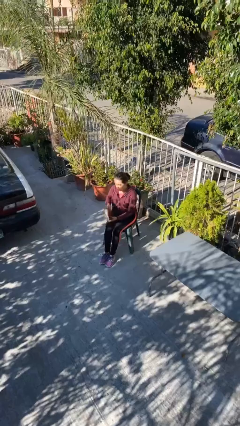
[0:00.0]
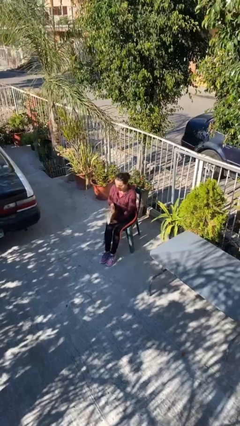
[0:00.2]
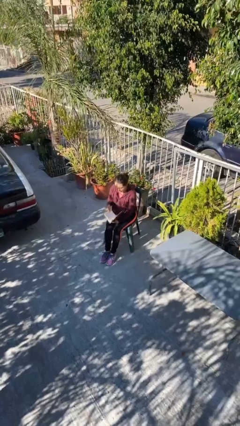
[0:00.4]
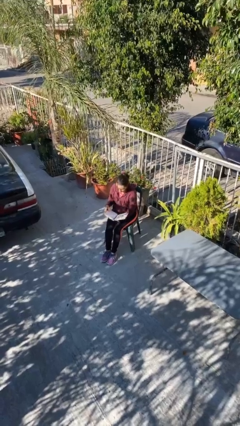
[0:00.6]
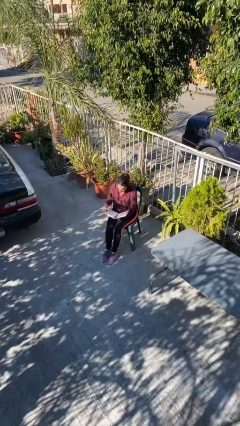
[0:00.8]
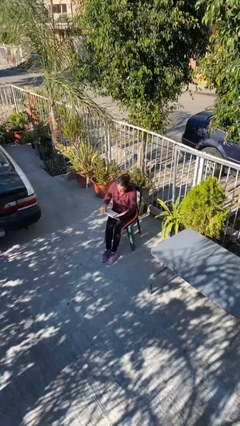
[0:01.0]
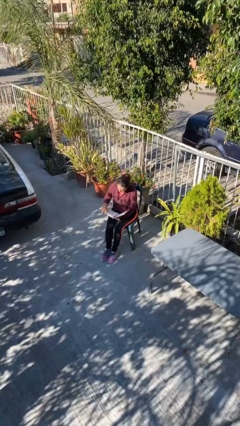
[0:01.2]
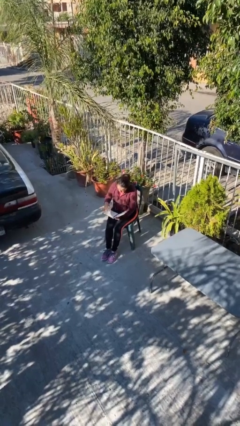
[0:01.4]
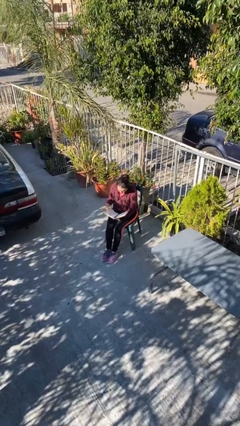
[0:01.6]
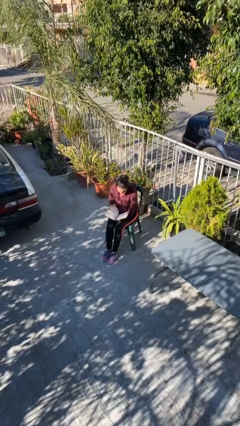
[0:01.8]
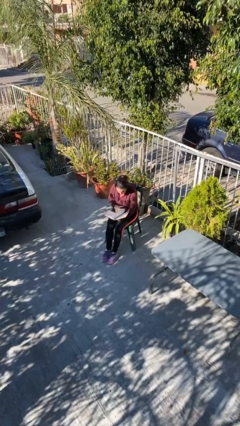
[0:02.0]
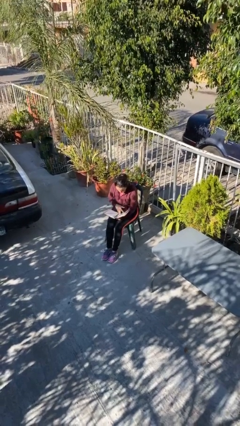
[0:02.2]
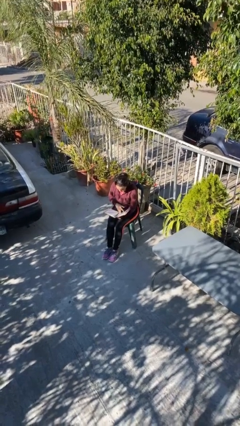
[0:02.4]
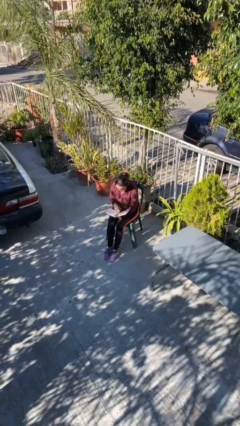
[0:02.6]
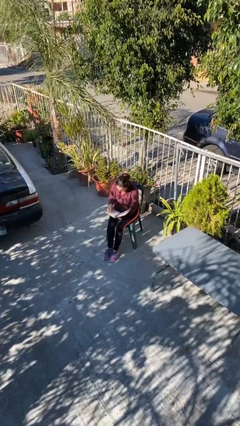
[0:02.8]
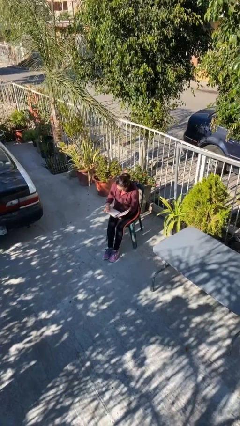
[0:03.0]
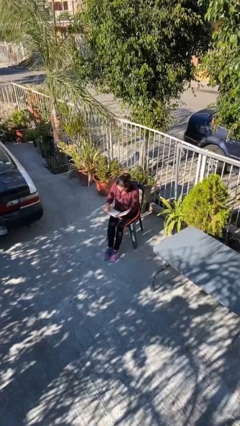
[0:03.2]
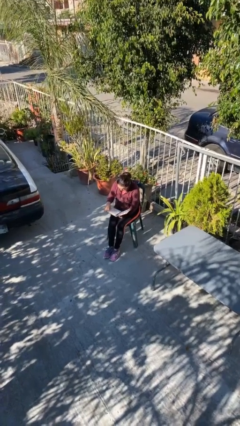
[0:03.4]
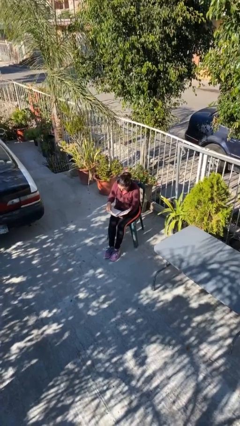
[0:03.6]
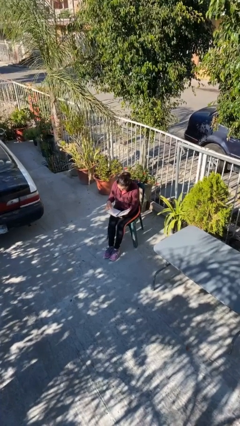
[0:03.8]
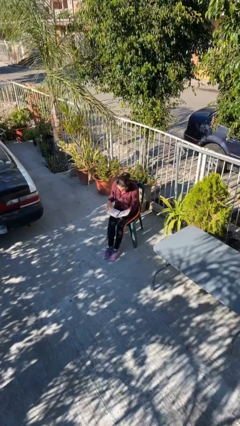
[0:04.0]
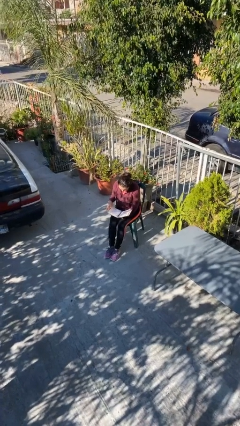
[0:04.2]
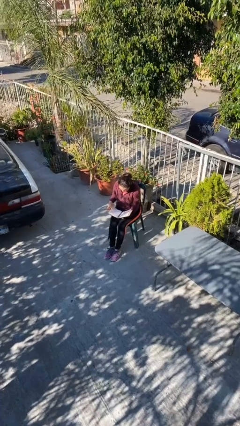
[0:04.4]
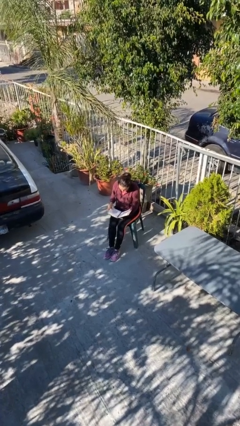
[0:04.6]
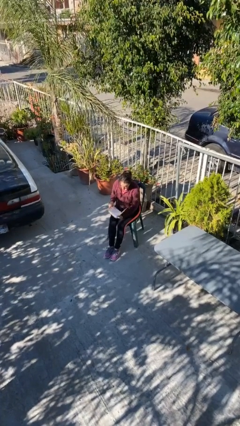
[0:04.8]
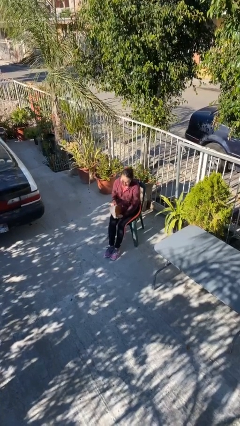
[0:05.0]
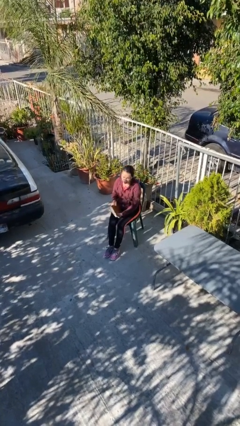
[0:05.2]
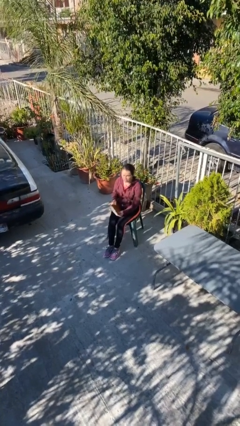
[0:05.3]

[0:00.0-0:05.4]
person reads document

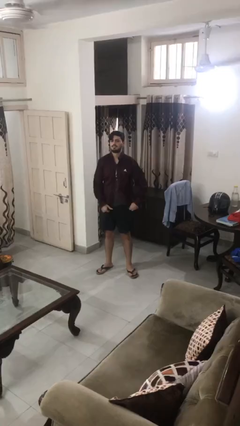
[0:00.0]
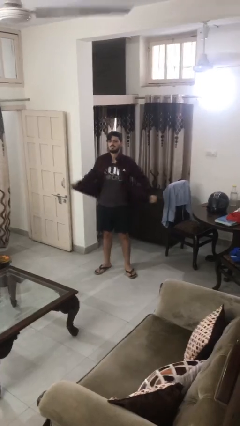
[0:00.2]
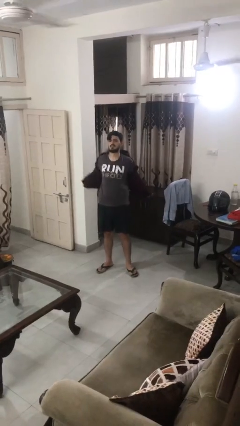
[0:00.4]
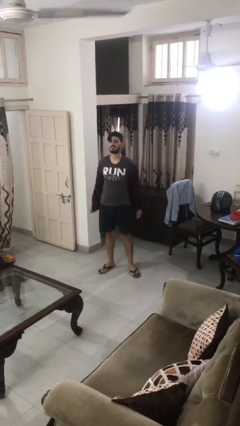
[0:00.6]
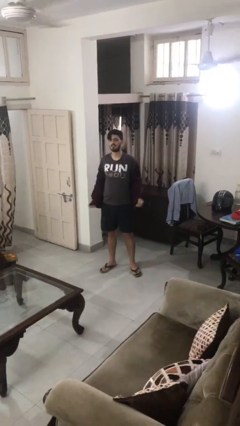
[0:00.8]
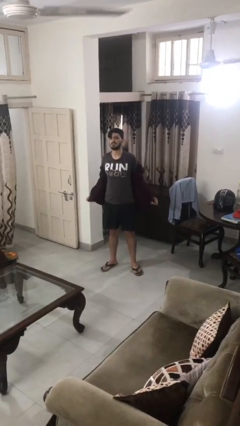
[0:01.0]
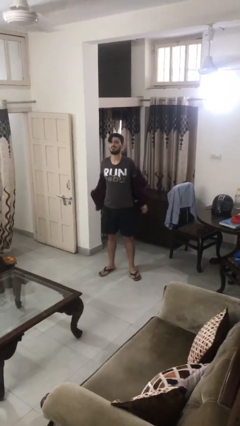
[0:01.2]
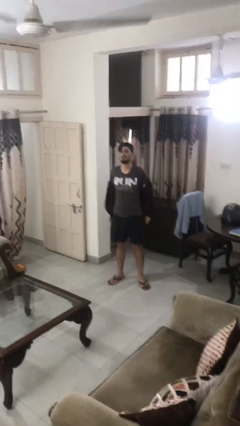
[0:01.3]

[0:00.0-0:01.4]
person takes off jacket

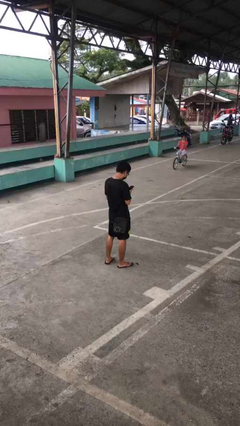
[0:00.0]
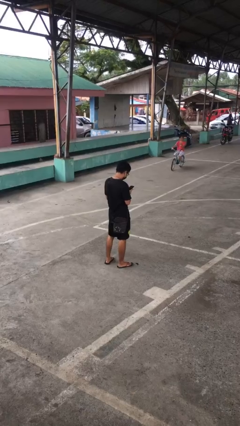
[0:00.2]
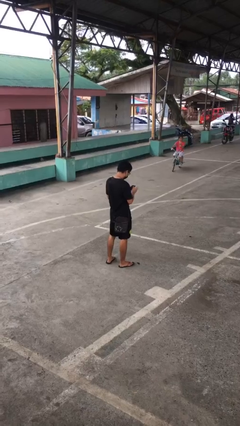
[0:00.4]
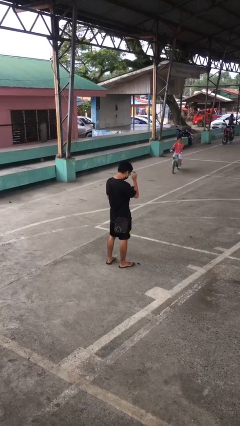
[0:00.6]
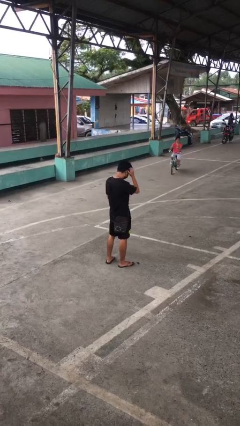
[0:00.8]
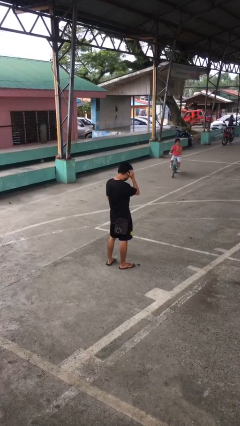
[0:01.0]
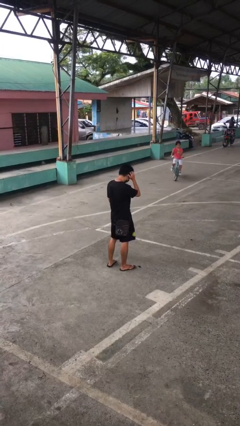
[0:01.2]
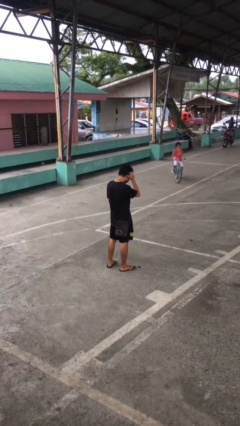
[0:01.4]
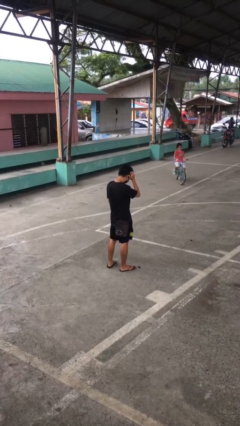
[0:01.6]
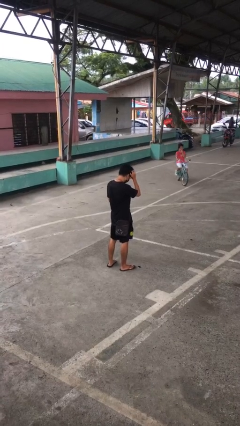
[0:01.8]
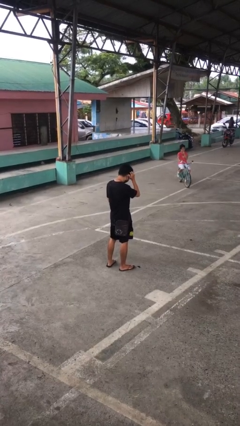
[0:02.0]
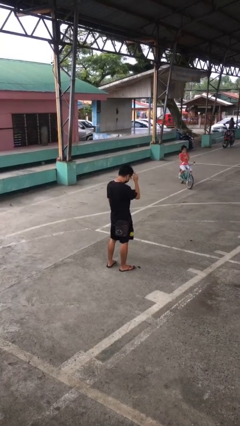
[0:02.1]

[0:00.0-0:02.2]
person scratches face

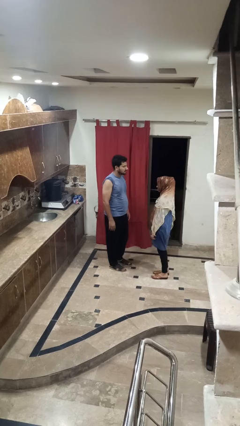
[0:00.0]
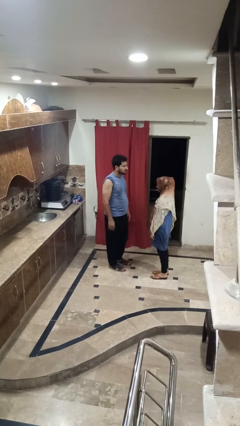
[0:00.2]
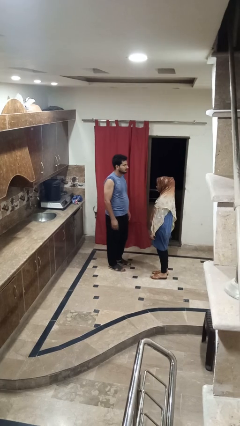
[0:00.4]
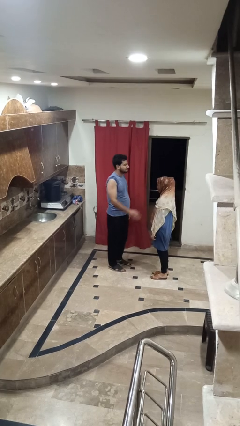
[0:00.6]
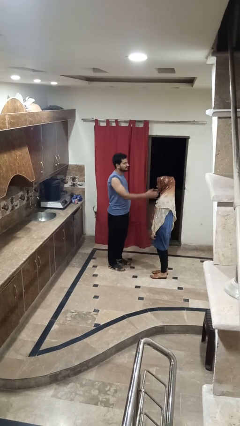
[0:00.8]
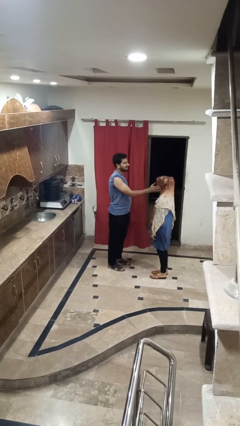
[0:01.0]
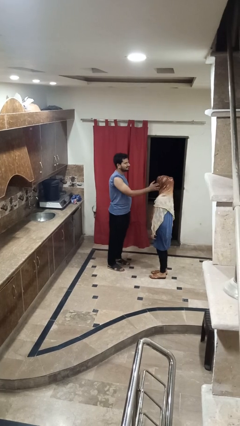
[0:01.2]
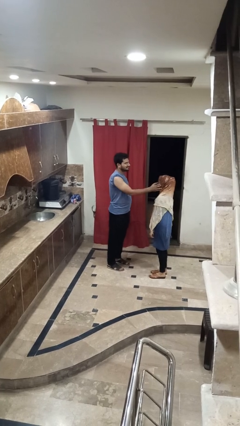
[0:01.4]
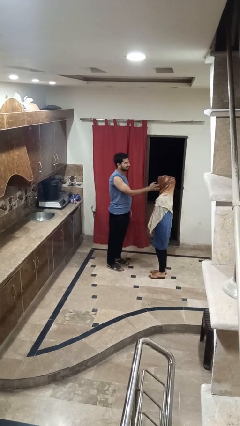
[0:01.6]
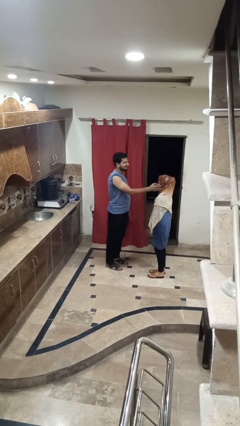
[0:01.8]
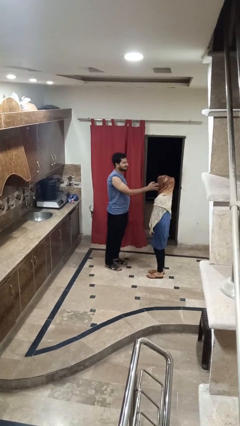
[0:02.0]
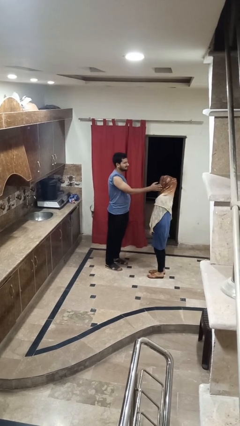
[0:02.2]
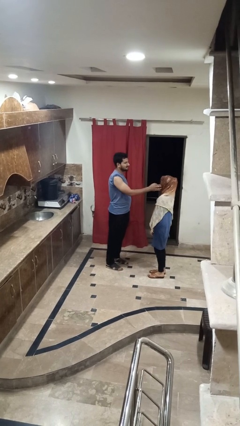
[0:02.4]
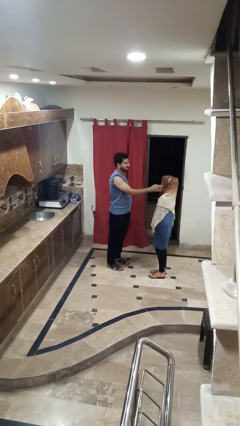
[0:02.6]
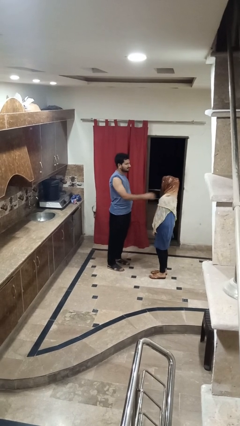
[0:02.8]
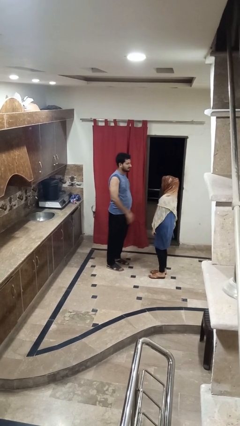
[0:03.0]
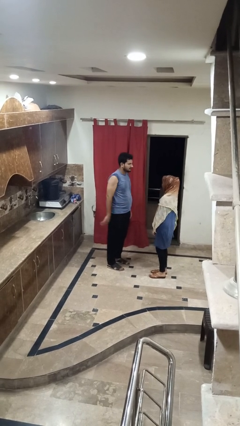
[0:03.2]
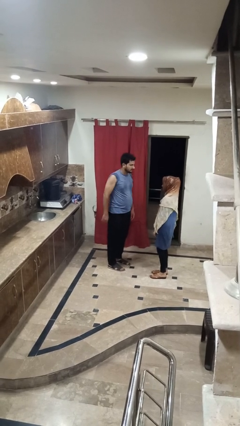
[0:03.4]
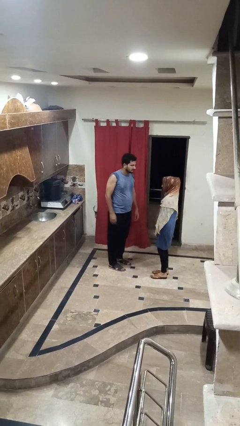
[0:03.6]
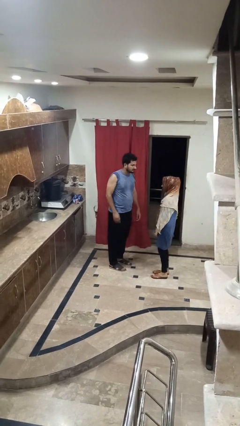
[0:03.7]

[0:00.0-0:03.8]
person touches face of person

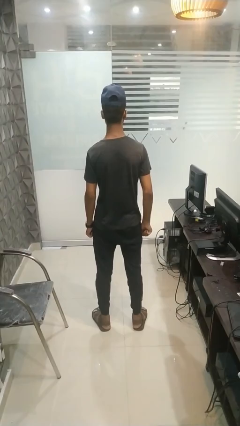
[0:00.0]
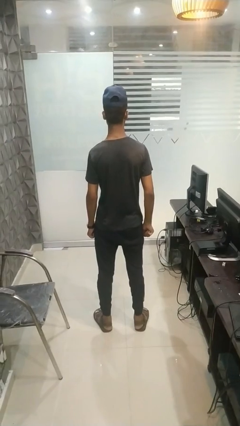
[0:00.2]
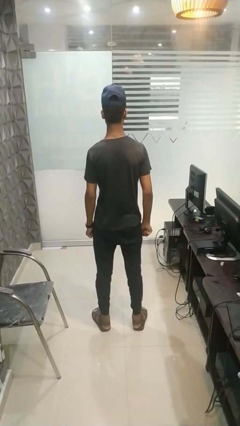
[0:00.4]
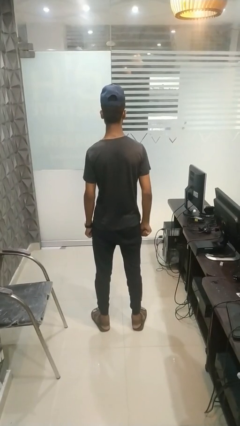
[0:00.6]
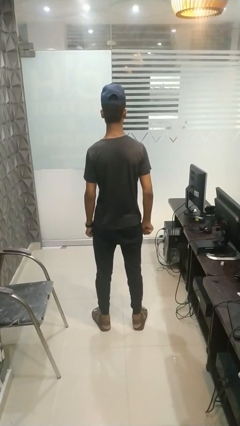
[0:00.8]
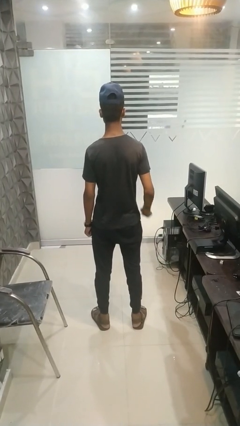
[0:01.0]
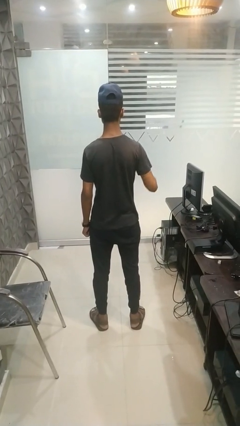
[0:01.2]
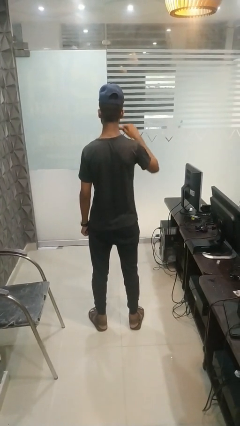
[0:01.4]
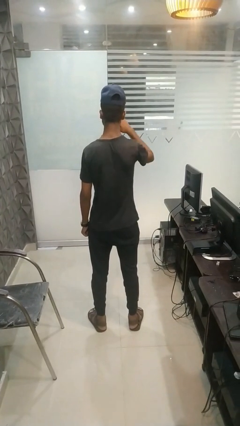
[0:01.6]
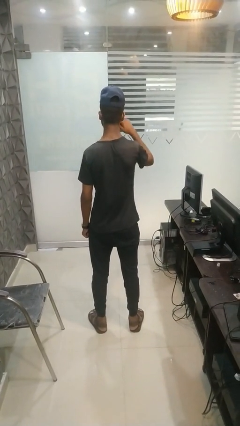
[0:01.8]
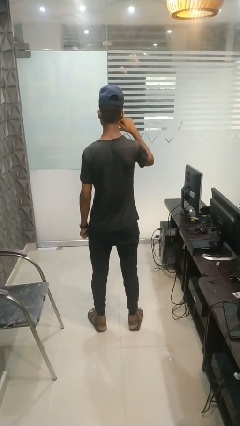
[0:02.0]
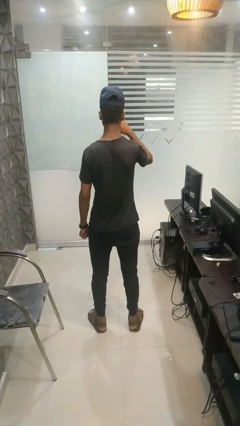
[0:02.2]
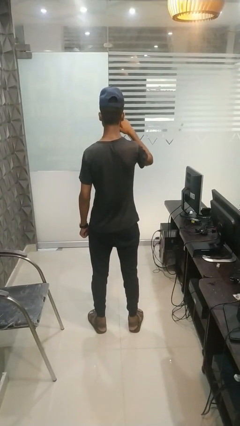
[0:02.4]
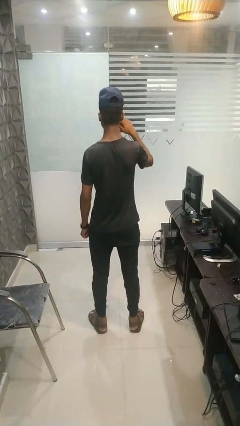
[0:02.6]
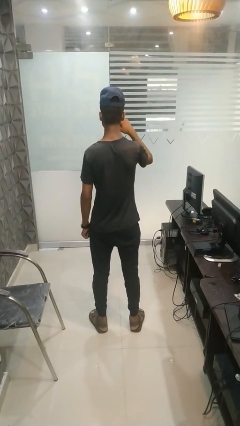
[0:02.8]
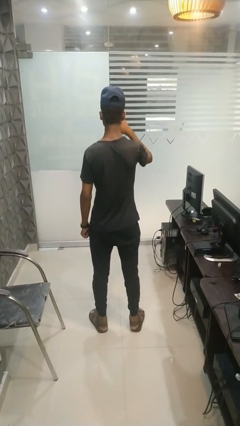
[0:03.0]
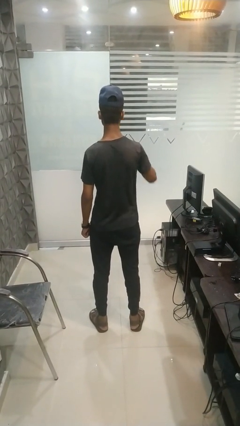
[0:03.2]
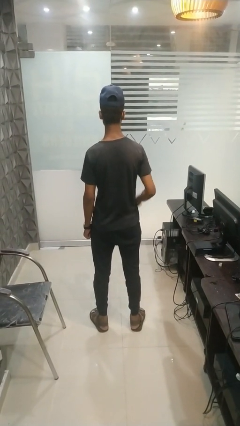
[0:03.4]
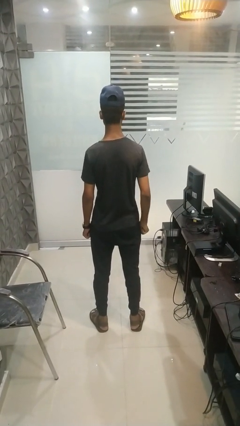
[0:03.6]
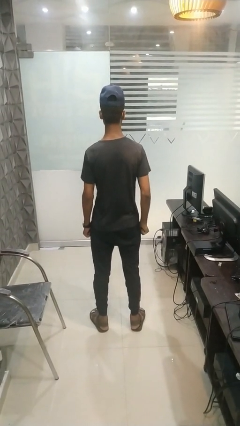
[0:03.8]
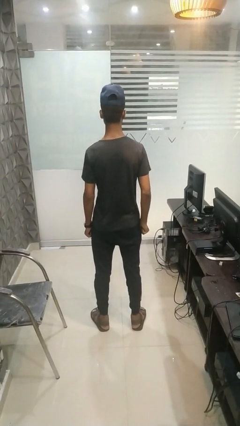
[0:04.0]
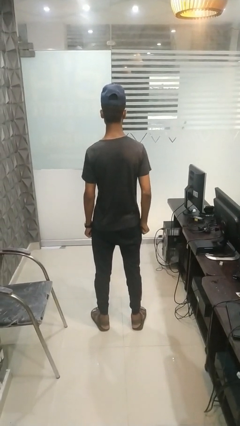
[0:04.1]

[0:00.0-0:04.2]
person brushes teeth

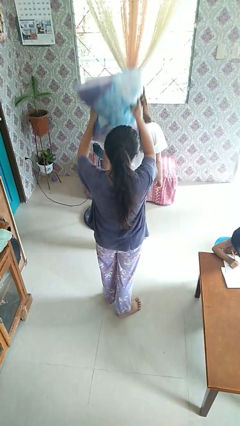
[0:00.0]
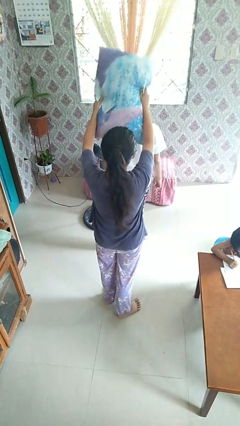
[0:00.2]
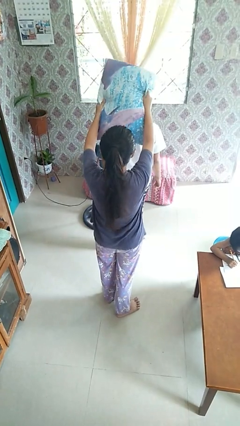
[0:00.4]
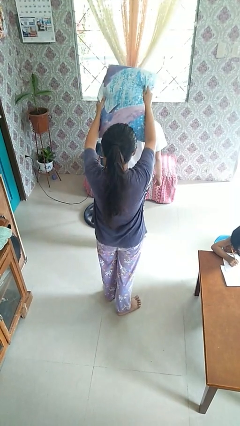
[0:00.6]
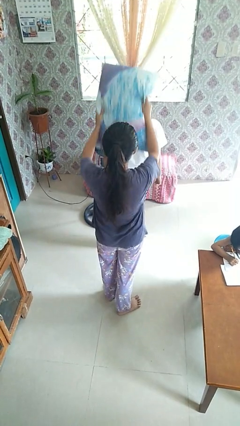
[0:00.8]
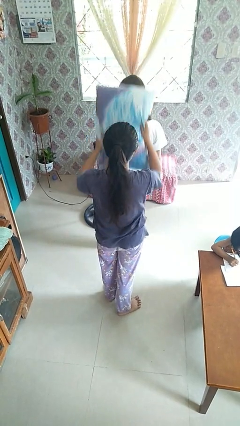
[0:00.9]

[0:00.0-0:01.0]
person hits person with pillow
